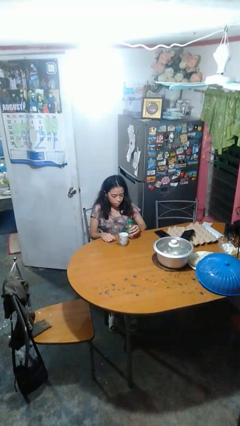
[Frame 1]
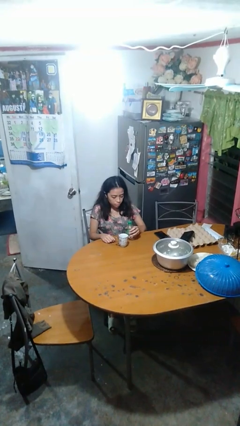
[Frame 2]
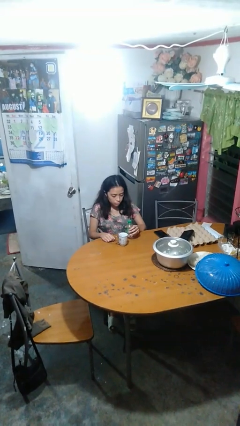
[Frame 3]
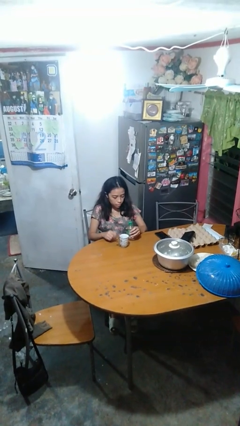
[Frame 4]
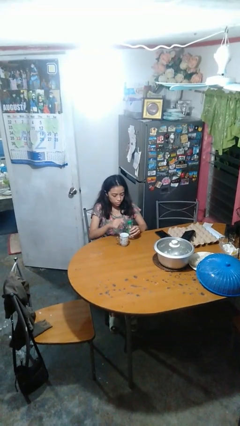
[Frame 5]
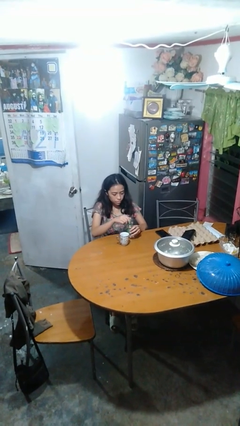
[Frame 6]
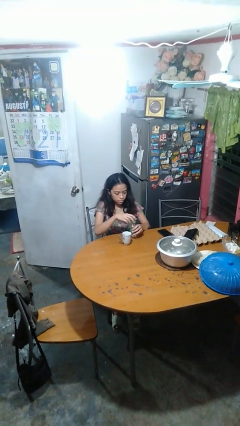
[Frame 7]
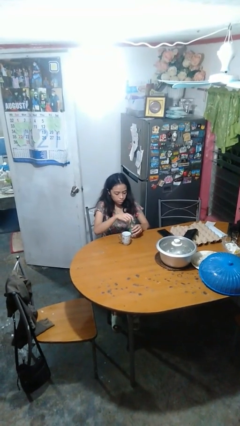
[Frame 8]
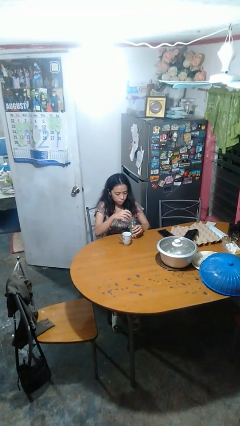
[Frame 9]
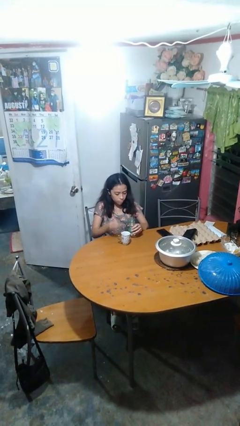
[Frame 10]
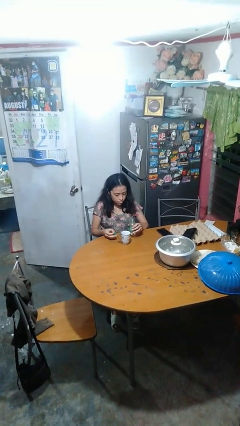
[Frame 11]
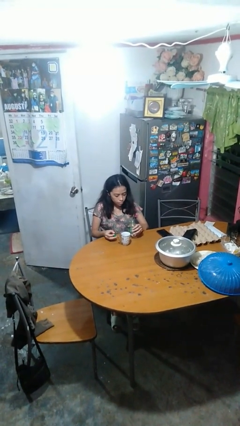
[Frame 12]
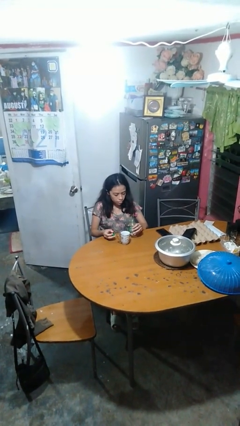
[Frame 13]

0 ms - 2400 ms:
person unscrews lid from bottle

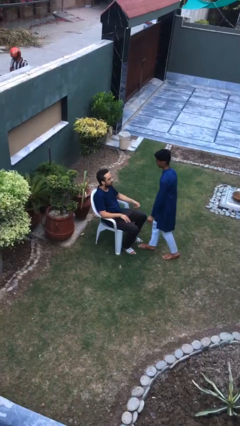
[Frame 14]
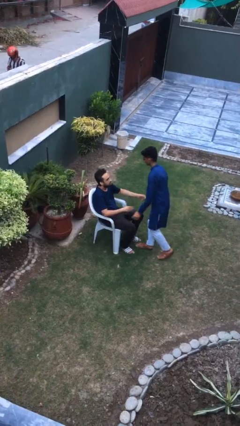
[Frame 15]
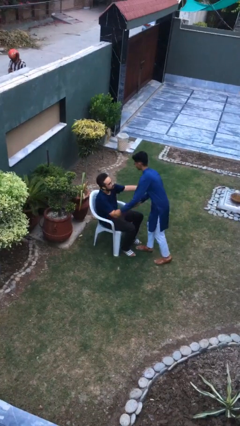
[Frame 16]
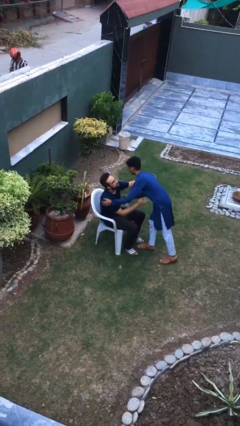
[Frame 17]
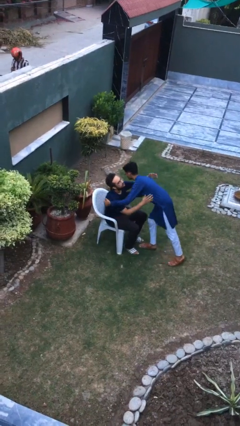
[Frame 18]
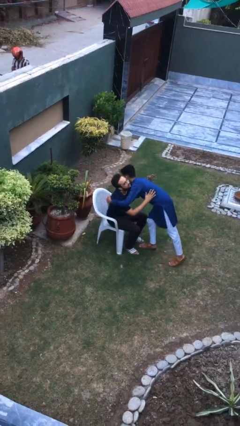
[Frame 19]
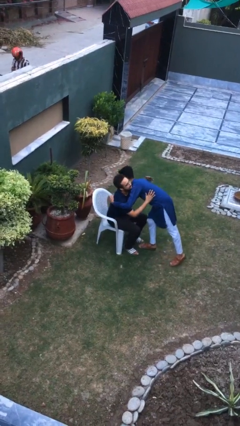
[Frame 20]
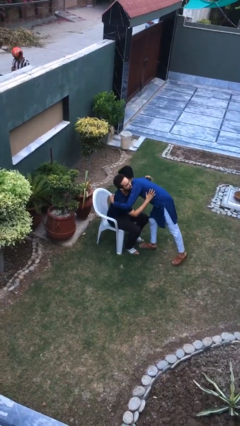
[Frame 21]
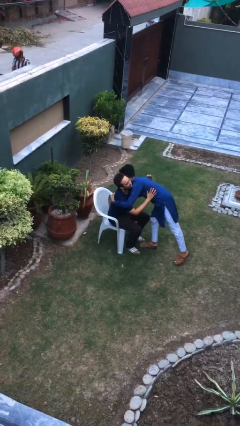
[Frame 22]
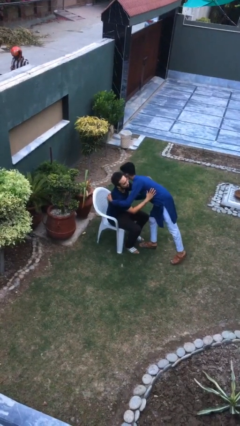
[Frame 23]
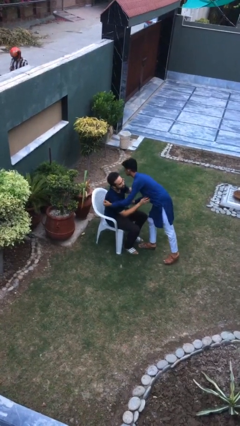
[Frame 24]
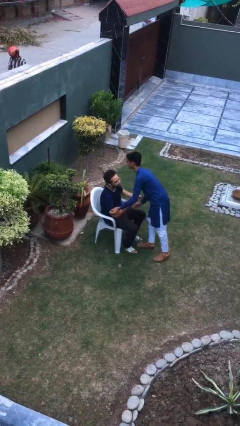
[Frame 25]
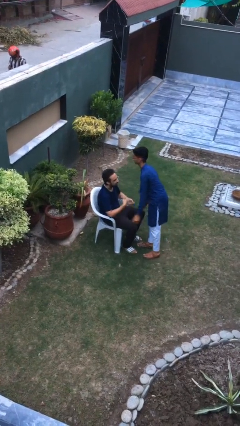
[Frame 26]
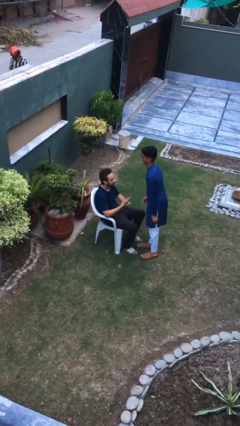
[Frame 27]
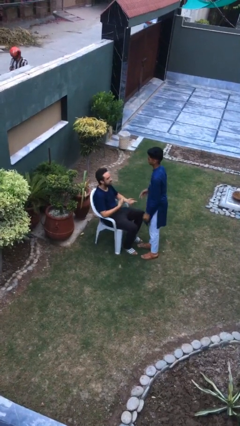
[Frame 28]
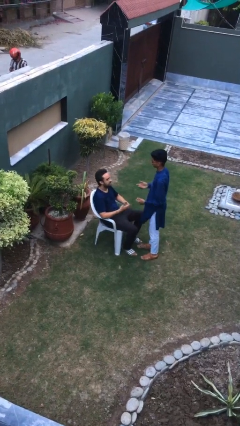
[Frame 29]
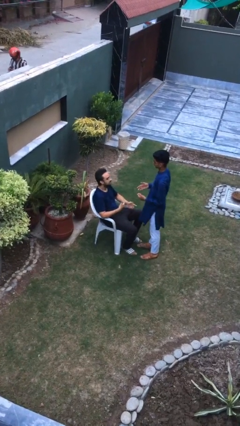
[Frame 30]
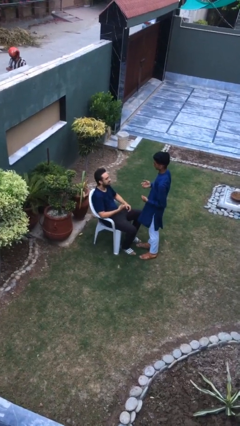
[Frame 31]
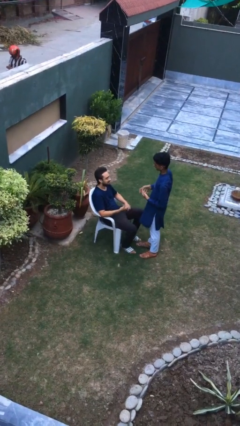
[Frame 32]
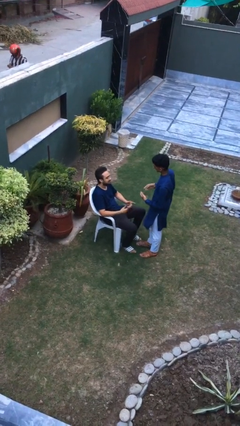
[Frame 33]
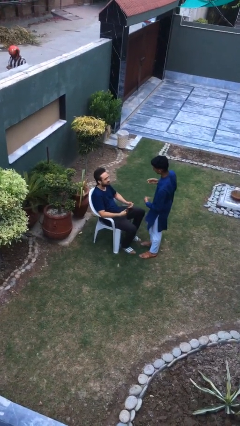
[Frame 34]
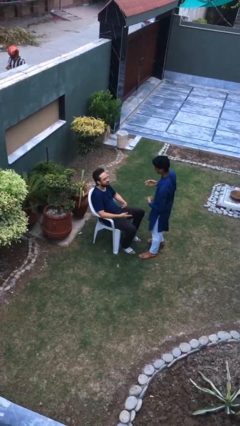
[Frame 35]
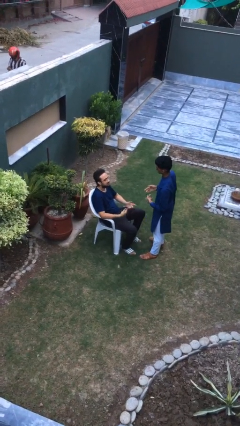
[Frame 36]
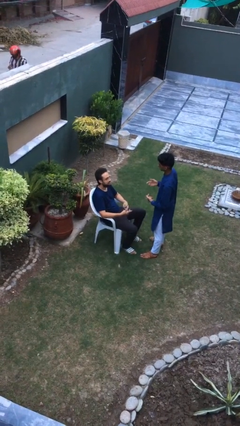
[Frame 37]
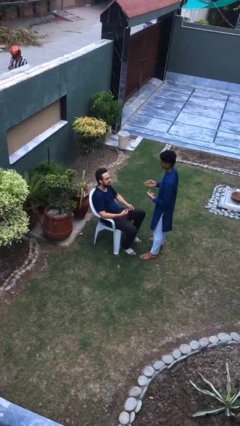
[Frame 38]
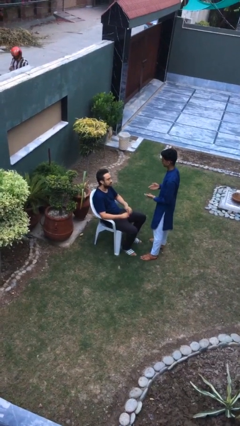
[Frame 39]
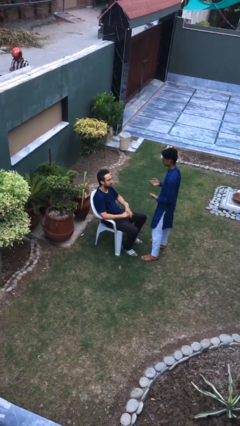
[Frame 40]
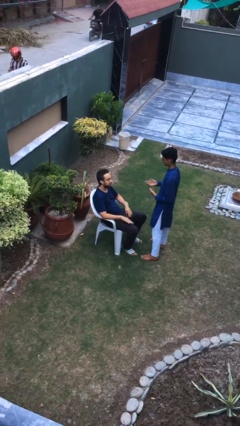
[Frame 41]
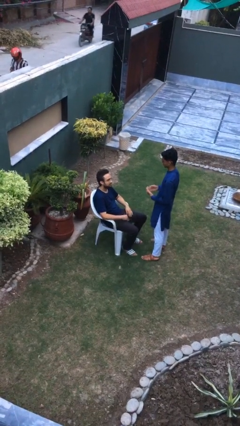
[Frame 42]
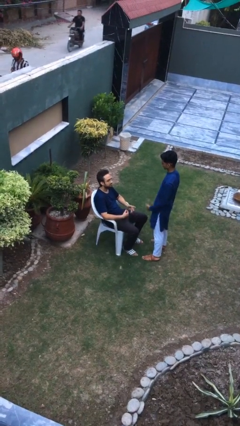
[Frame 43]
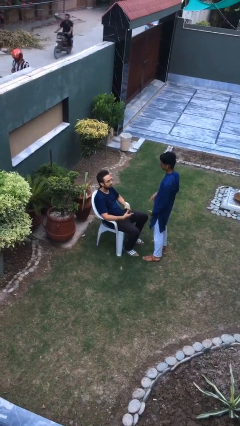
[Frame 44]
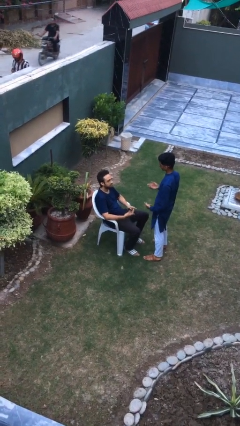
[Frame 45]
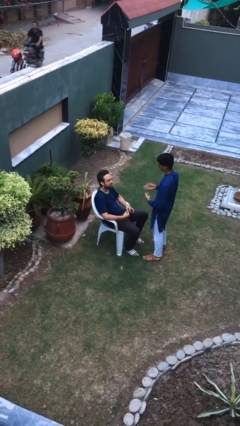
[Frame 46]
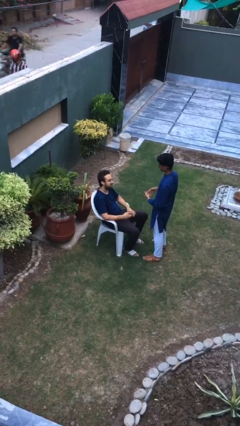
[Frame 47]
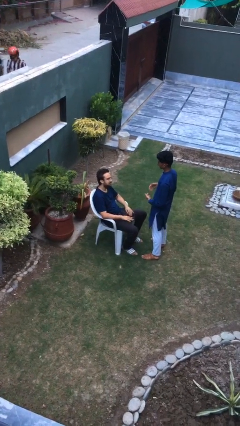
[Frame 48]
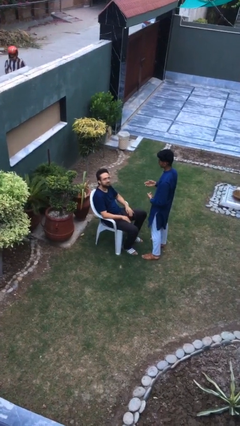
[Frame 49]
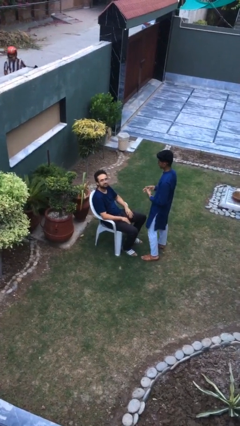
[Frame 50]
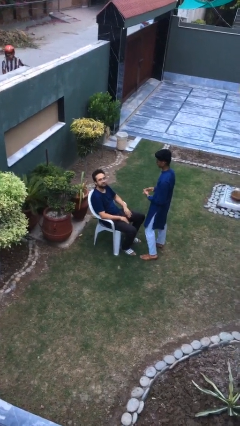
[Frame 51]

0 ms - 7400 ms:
person embraces person

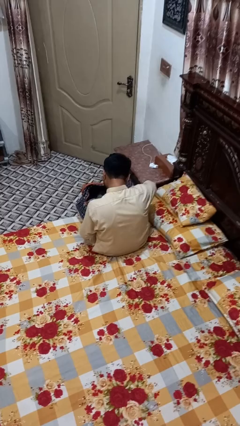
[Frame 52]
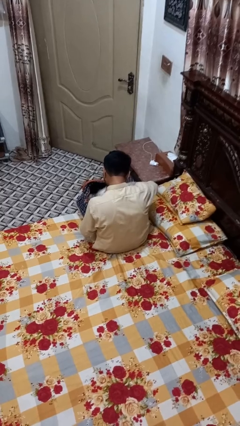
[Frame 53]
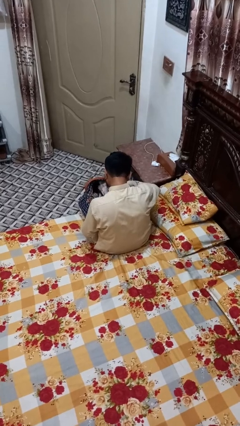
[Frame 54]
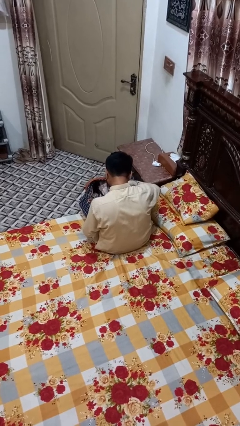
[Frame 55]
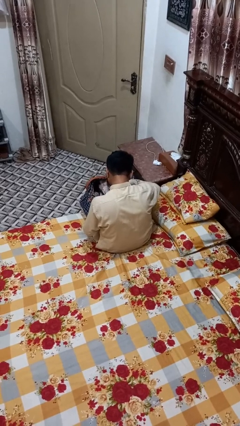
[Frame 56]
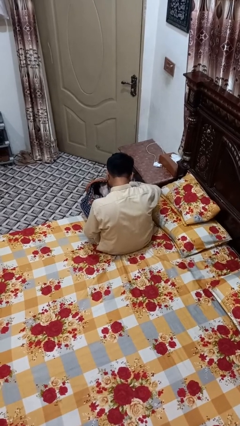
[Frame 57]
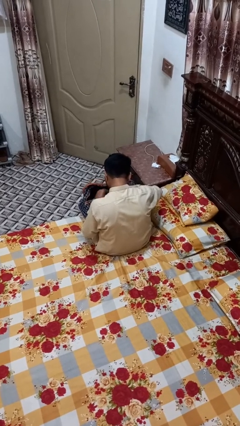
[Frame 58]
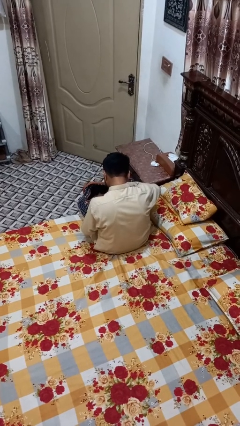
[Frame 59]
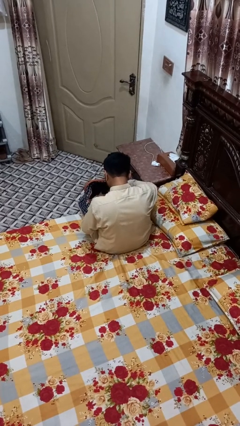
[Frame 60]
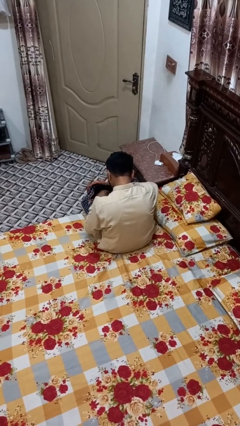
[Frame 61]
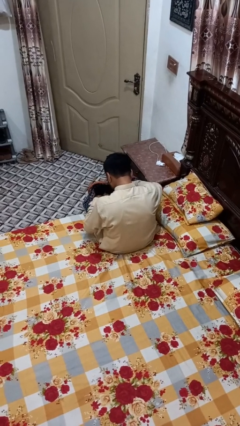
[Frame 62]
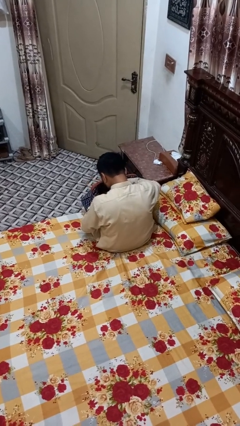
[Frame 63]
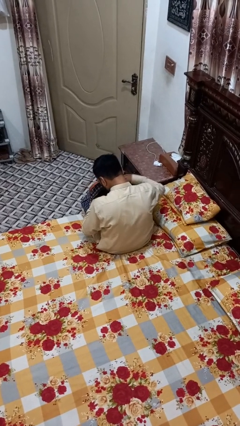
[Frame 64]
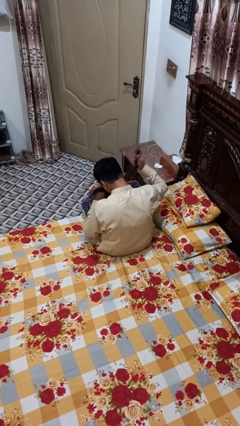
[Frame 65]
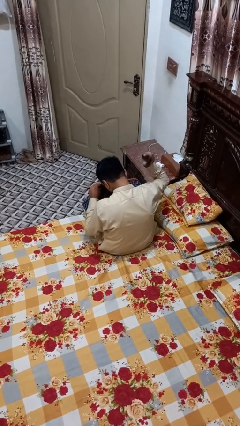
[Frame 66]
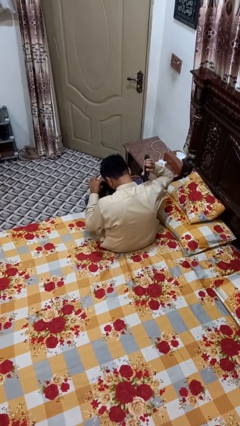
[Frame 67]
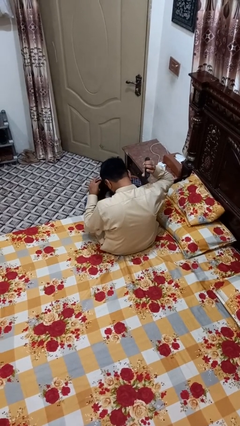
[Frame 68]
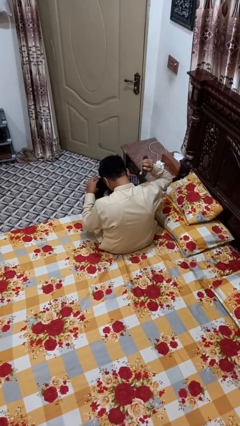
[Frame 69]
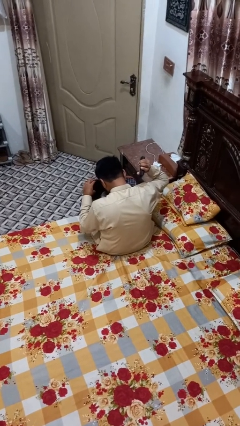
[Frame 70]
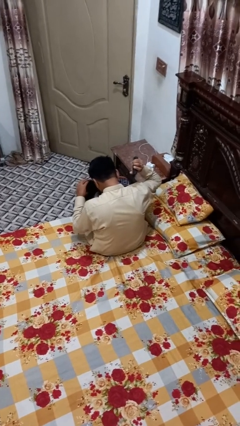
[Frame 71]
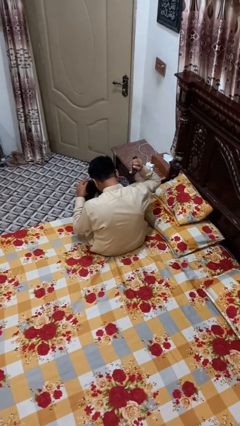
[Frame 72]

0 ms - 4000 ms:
person takes object from bag

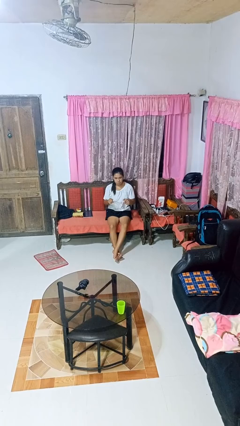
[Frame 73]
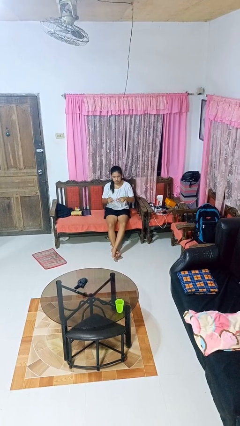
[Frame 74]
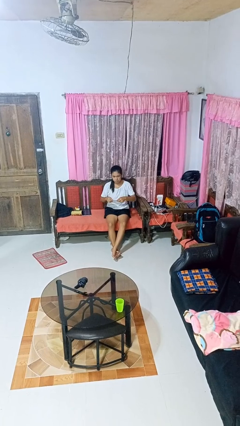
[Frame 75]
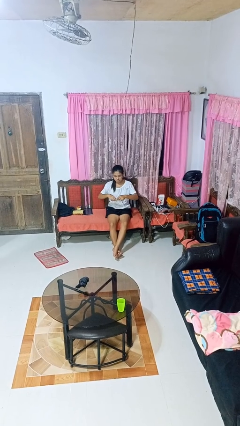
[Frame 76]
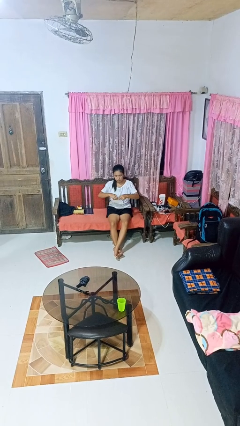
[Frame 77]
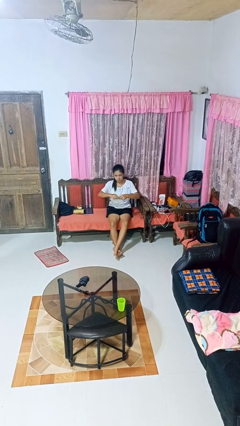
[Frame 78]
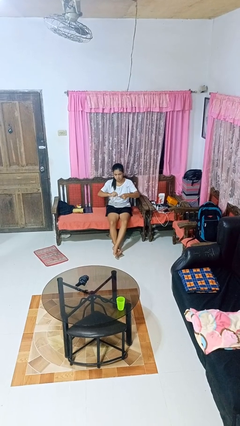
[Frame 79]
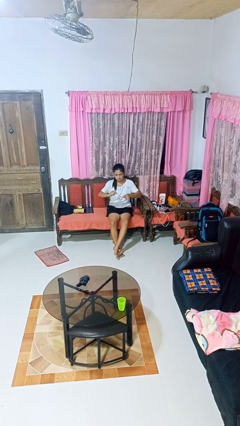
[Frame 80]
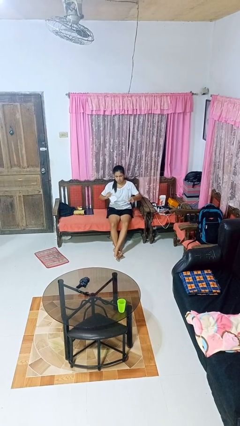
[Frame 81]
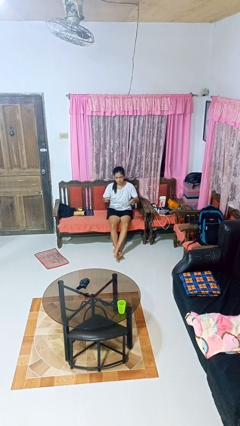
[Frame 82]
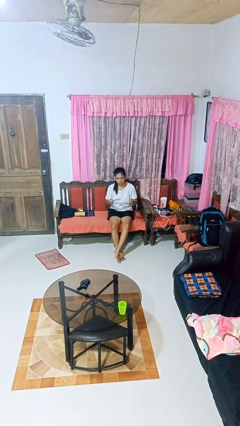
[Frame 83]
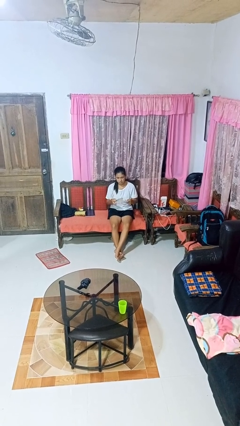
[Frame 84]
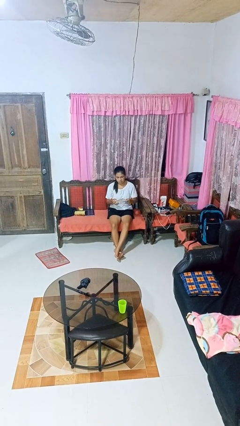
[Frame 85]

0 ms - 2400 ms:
person tears paper

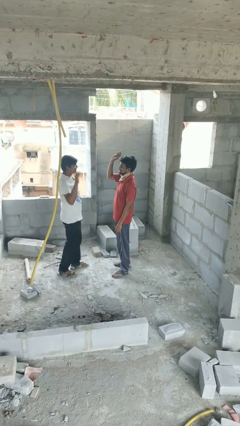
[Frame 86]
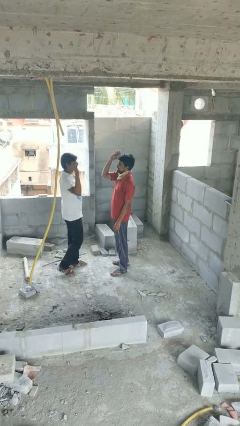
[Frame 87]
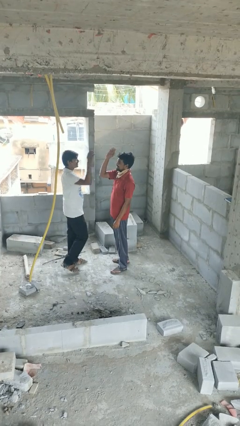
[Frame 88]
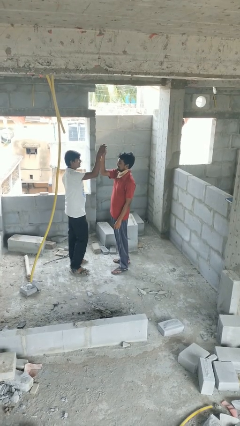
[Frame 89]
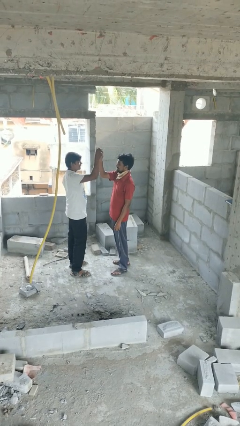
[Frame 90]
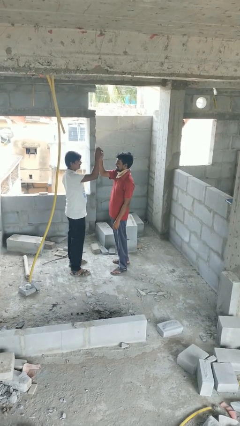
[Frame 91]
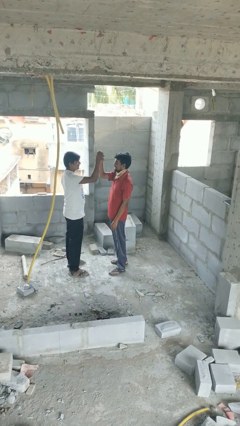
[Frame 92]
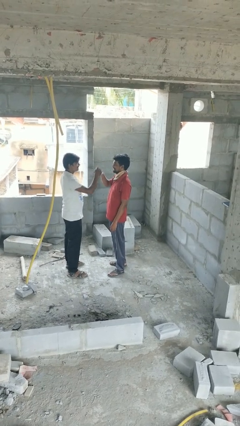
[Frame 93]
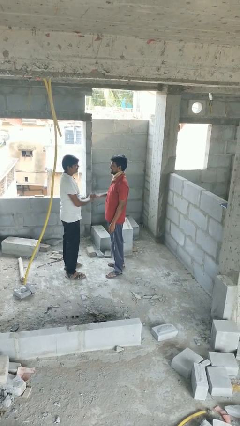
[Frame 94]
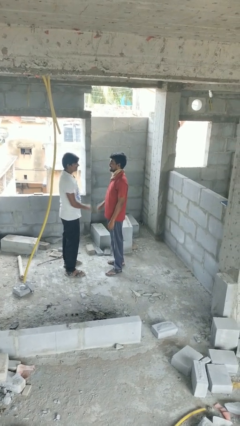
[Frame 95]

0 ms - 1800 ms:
person highfives hand
